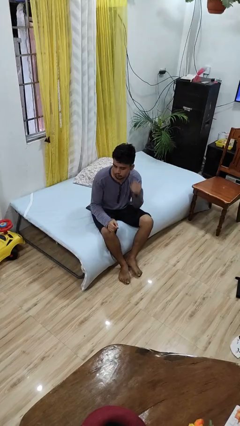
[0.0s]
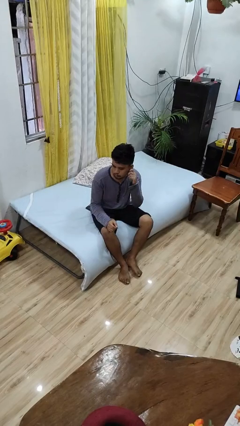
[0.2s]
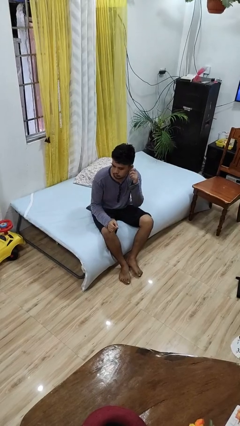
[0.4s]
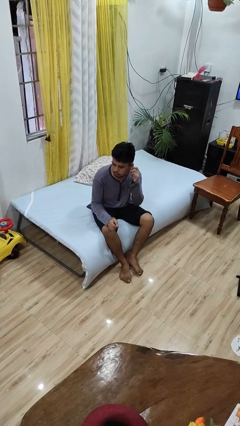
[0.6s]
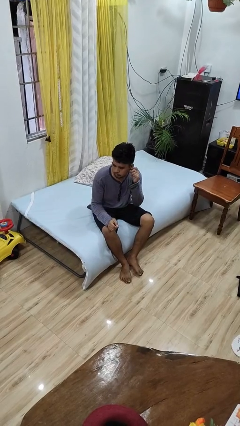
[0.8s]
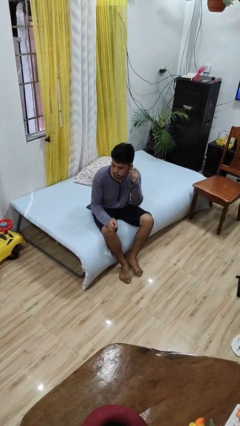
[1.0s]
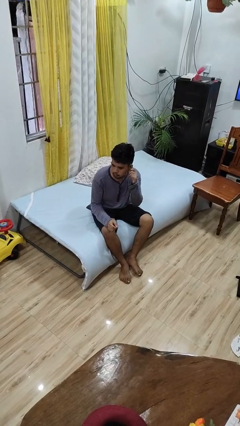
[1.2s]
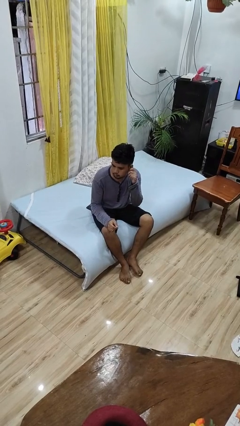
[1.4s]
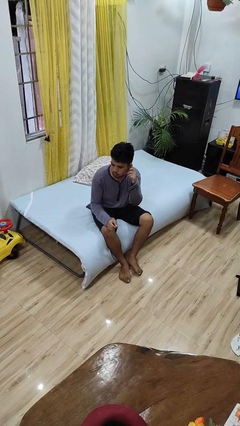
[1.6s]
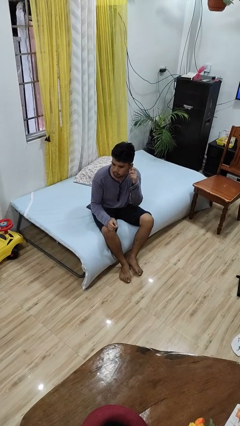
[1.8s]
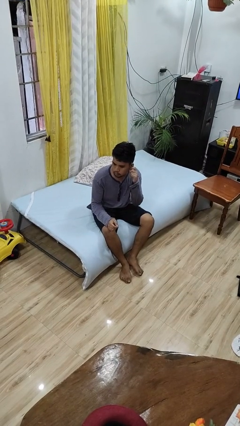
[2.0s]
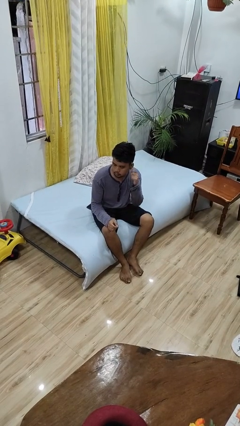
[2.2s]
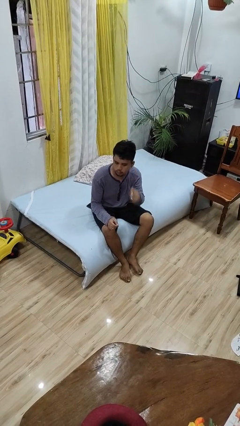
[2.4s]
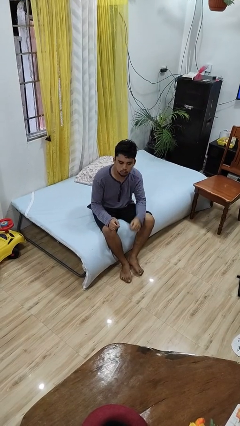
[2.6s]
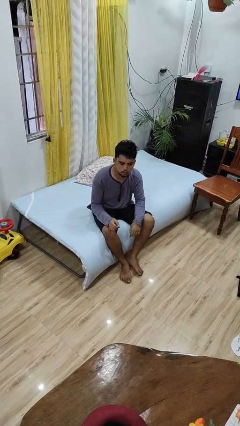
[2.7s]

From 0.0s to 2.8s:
person touches earlobe

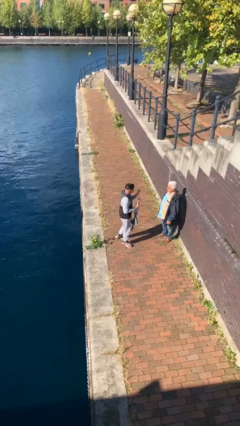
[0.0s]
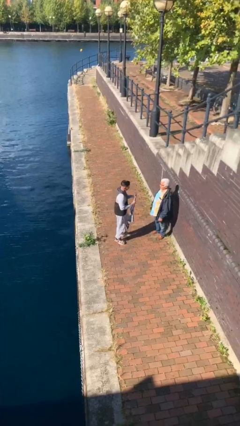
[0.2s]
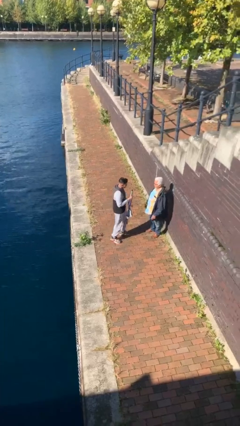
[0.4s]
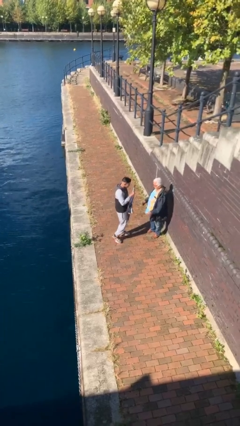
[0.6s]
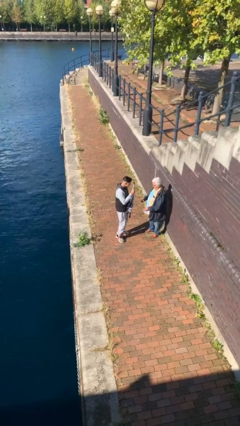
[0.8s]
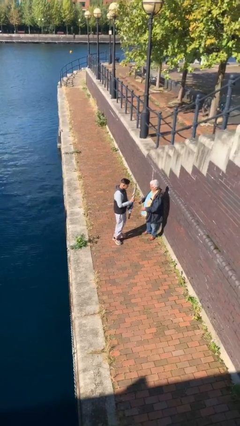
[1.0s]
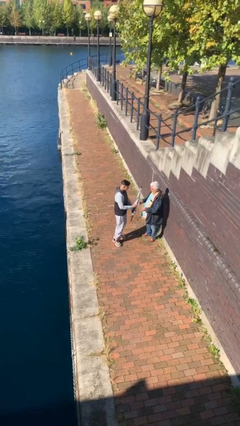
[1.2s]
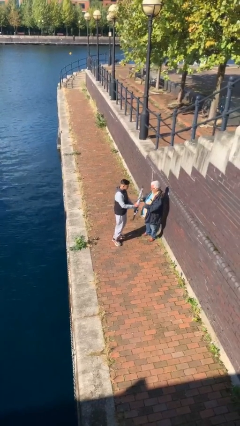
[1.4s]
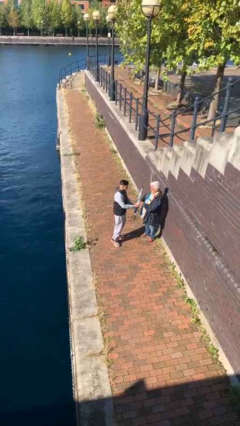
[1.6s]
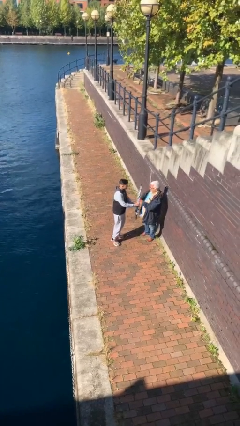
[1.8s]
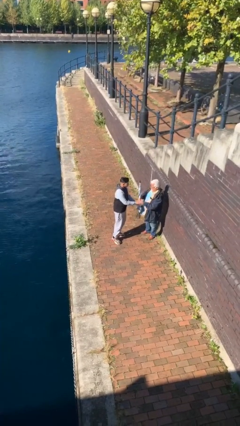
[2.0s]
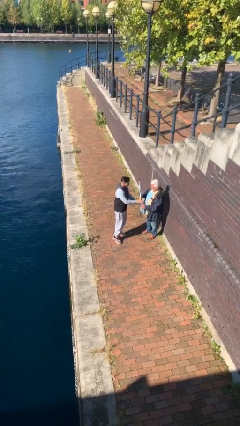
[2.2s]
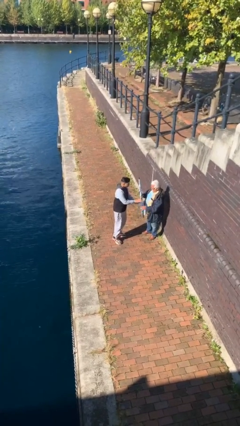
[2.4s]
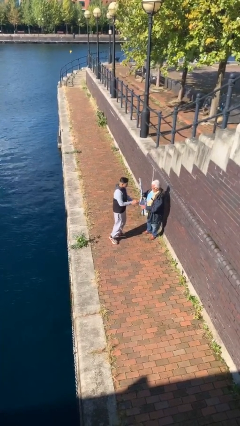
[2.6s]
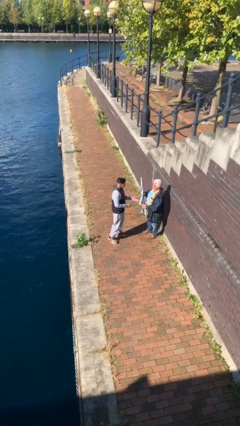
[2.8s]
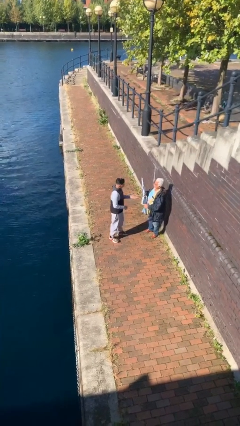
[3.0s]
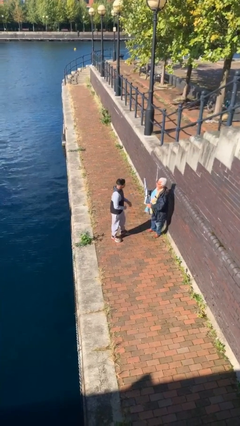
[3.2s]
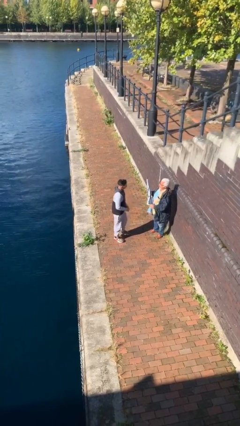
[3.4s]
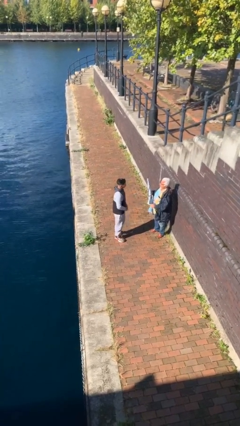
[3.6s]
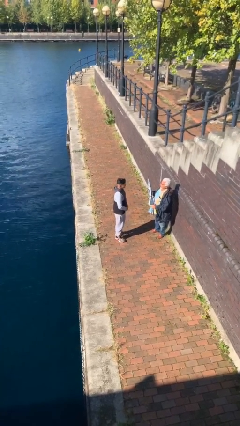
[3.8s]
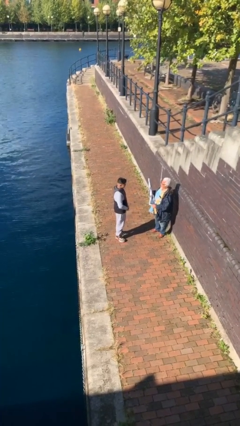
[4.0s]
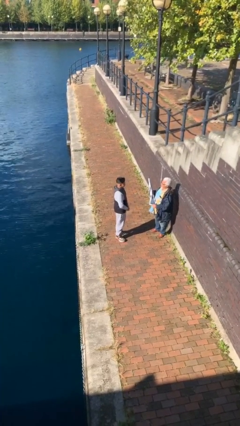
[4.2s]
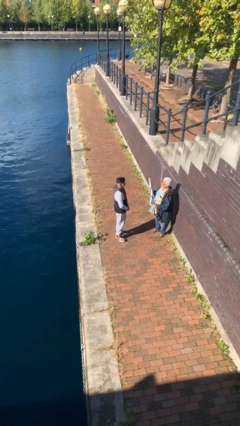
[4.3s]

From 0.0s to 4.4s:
person transfers object to person

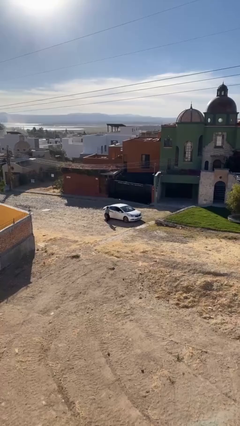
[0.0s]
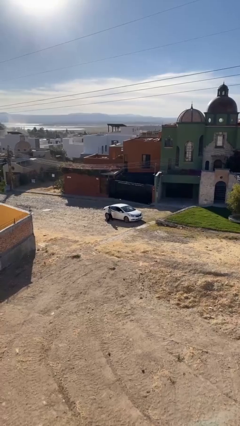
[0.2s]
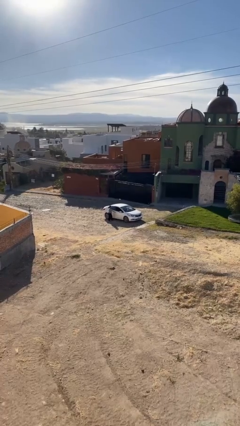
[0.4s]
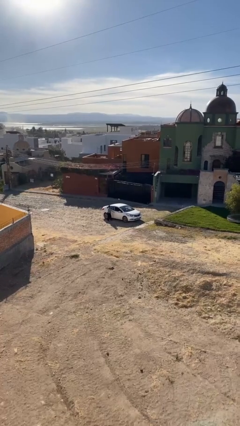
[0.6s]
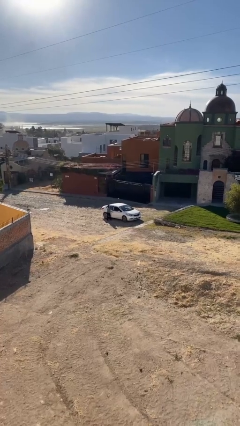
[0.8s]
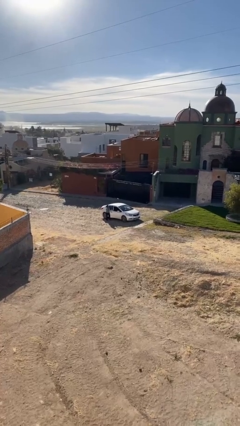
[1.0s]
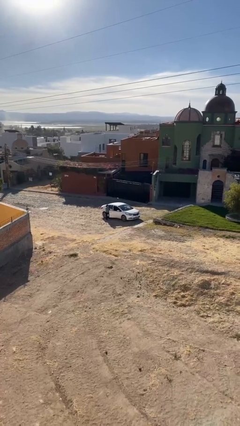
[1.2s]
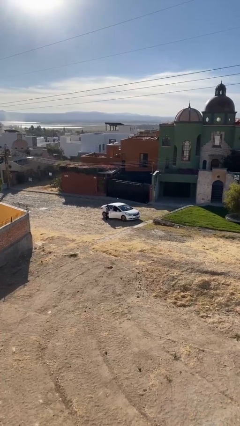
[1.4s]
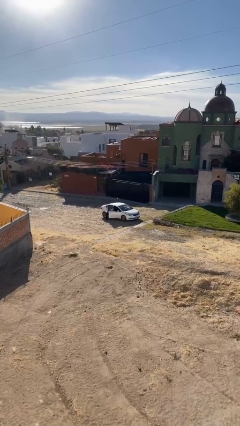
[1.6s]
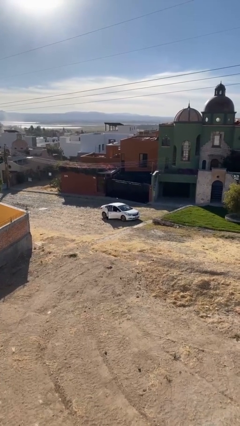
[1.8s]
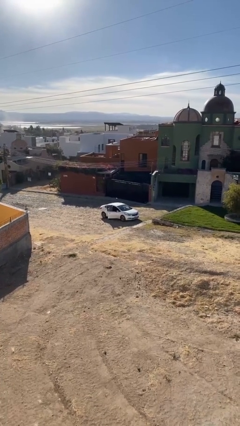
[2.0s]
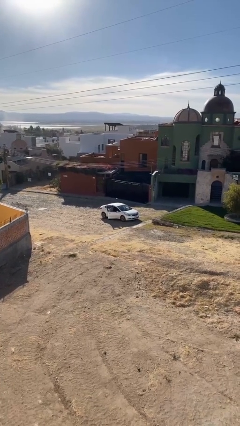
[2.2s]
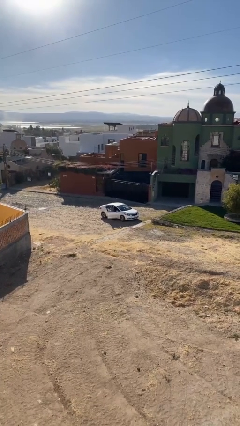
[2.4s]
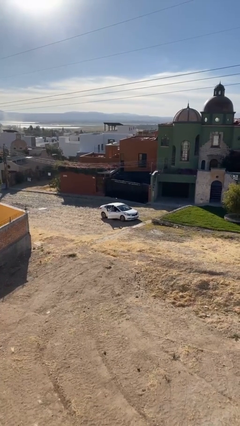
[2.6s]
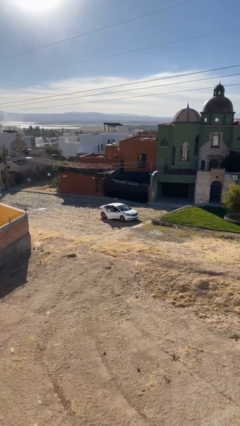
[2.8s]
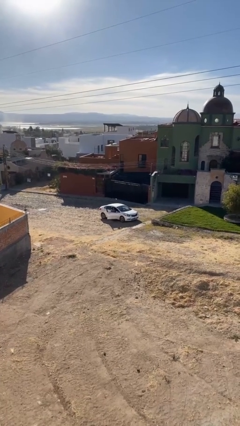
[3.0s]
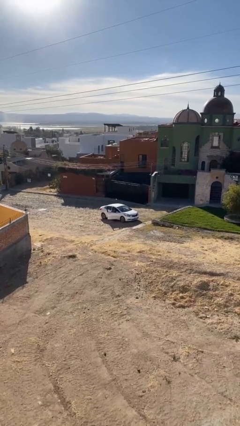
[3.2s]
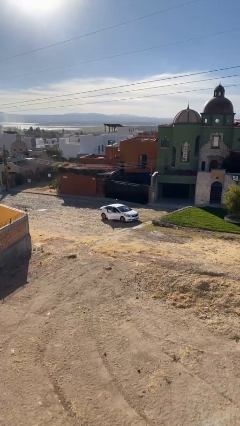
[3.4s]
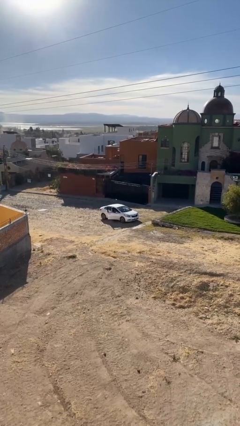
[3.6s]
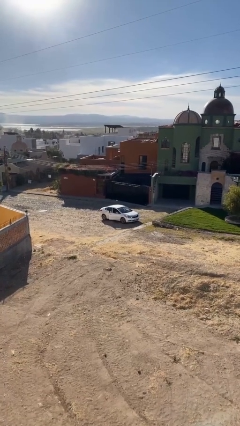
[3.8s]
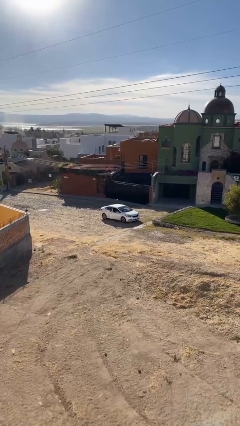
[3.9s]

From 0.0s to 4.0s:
car picks up person

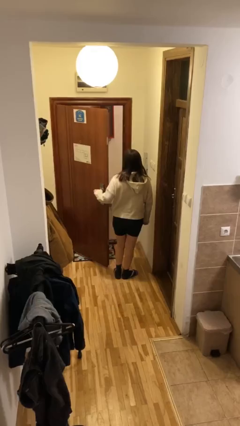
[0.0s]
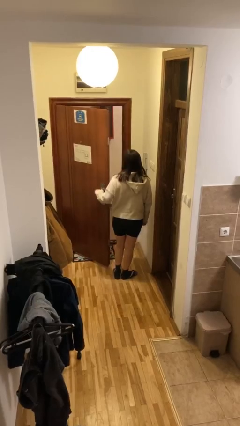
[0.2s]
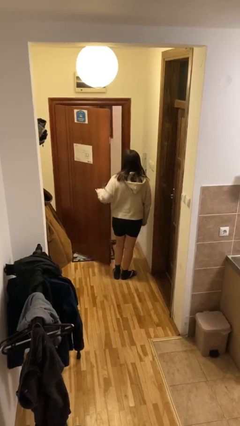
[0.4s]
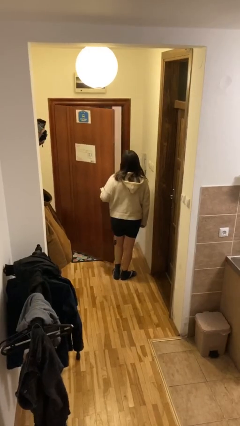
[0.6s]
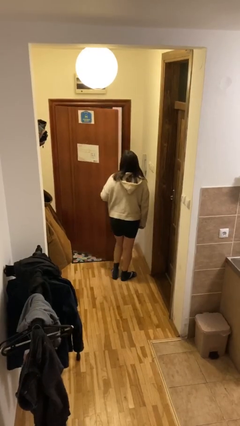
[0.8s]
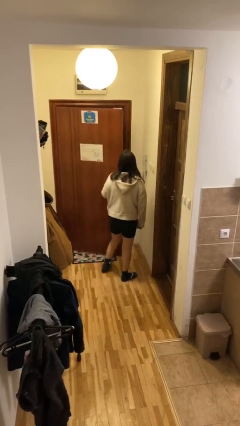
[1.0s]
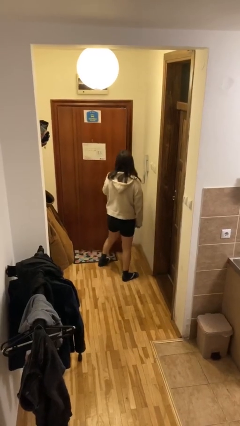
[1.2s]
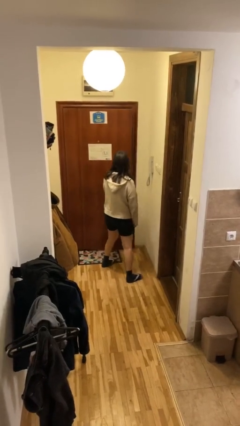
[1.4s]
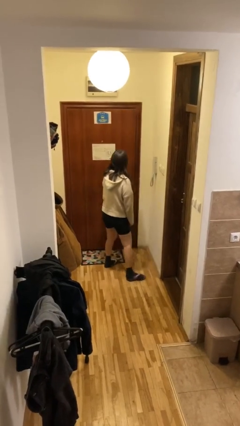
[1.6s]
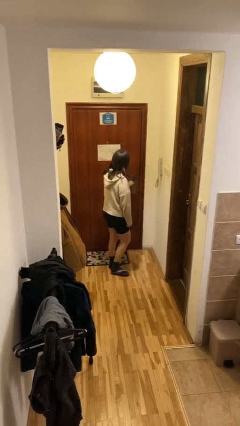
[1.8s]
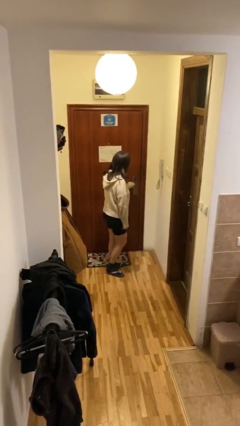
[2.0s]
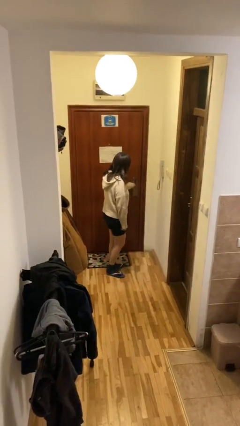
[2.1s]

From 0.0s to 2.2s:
person closes facility door

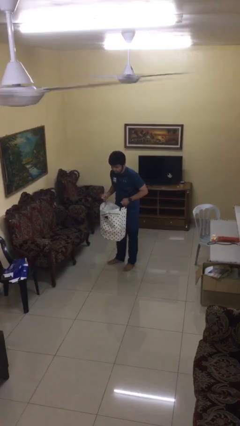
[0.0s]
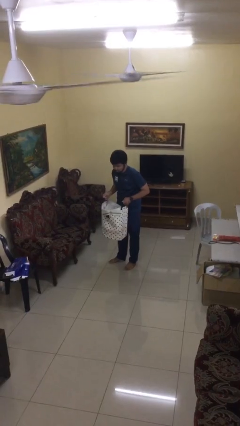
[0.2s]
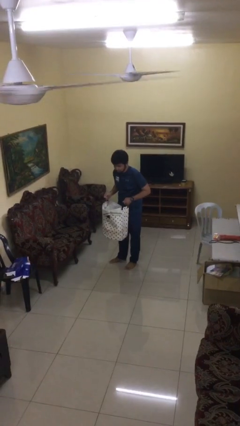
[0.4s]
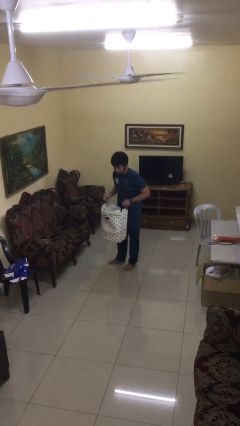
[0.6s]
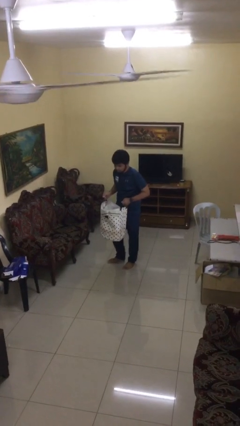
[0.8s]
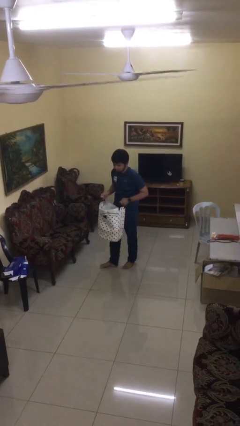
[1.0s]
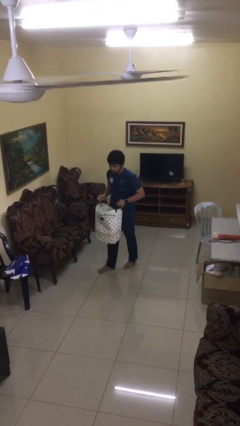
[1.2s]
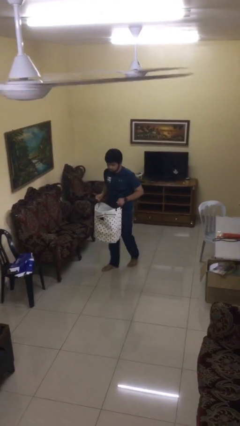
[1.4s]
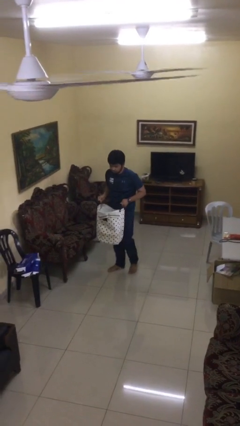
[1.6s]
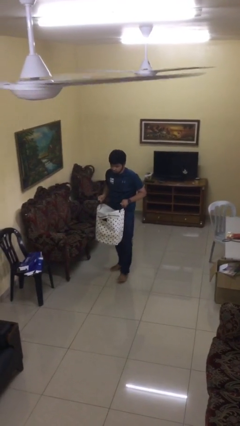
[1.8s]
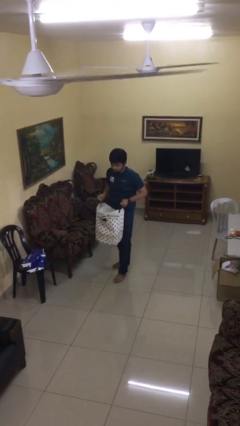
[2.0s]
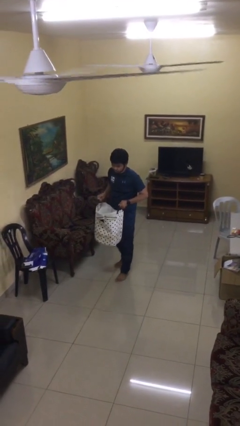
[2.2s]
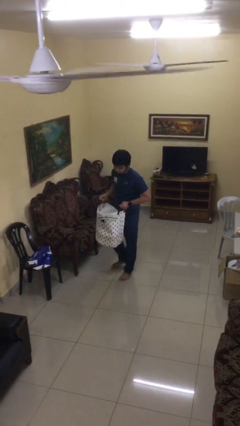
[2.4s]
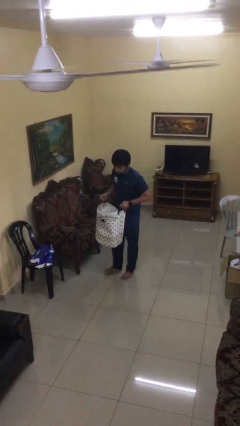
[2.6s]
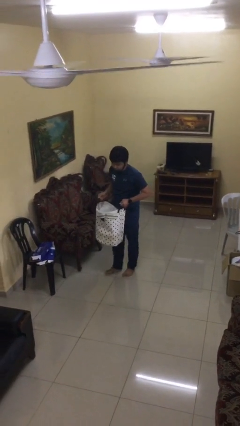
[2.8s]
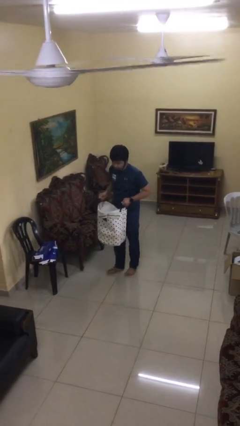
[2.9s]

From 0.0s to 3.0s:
person carries laundry basket

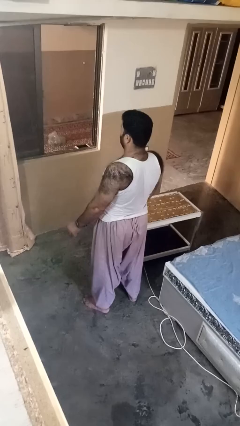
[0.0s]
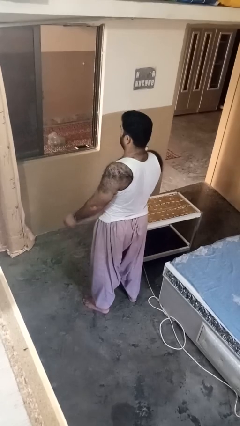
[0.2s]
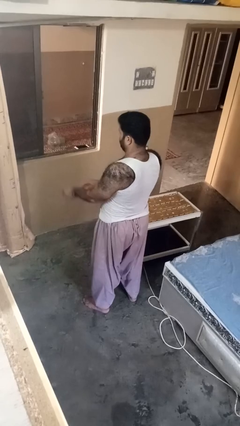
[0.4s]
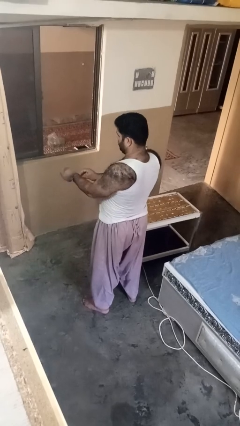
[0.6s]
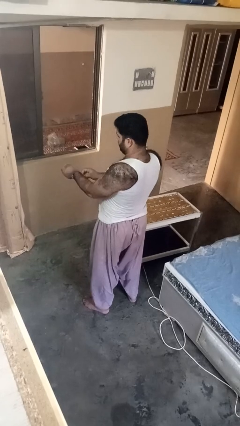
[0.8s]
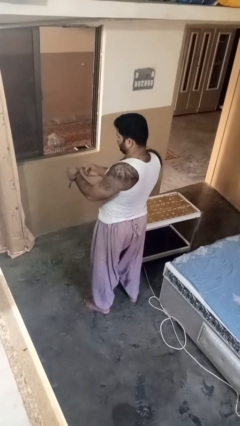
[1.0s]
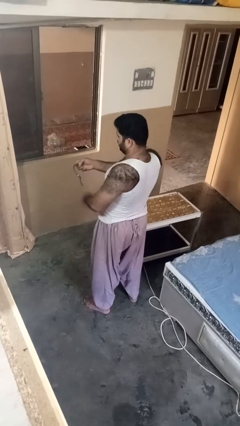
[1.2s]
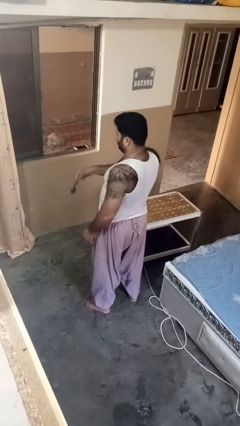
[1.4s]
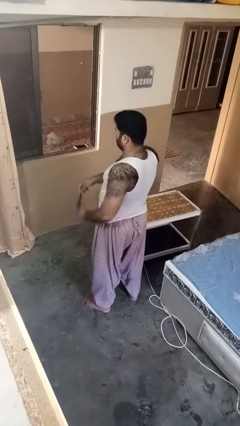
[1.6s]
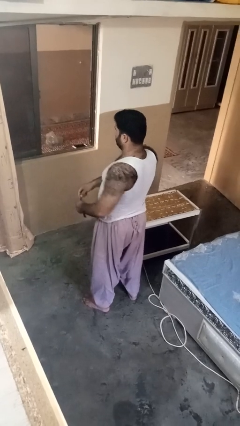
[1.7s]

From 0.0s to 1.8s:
person takes off wristwatch
